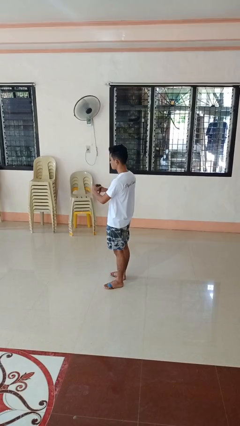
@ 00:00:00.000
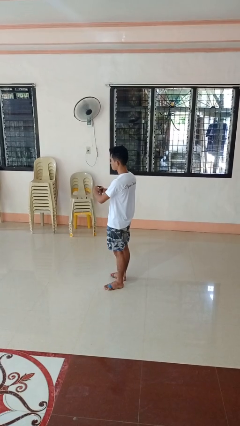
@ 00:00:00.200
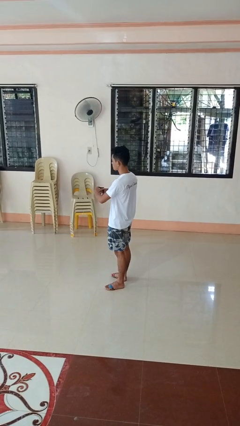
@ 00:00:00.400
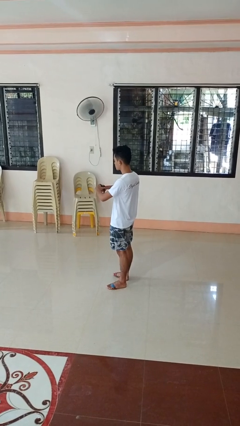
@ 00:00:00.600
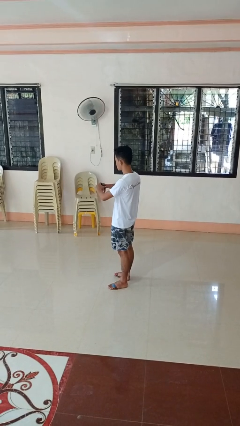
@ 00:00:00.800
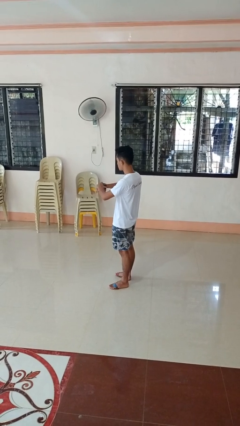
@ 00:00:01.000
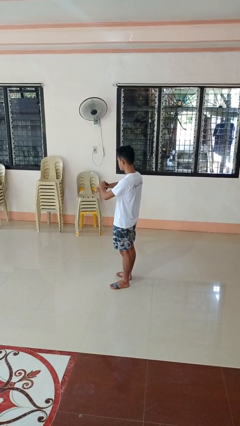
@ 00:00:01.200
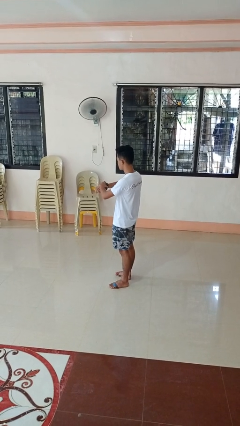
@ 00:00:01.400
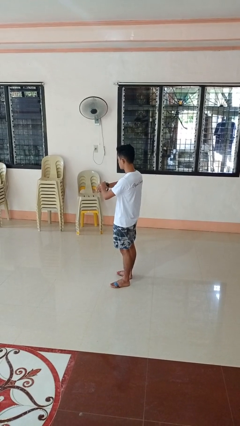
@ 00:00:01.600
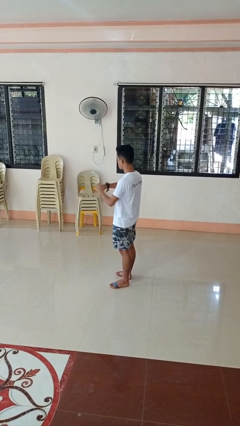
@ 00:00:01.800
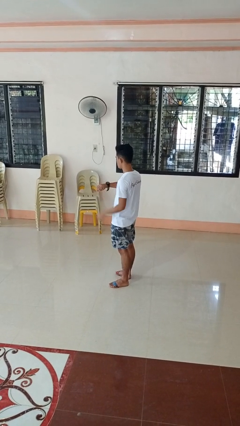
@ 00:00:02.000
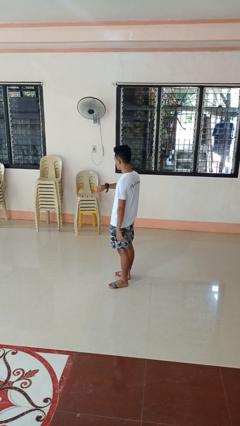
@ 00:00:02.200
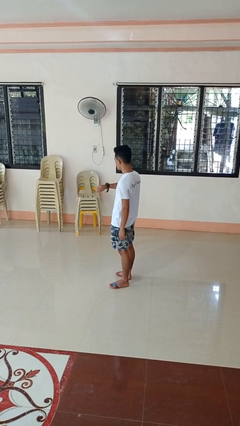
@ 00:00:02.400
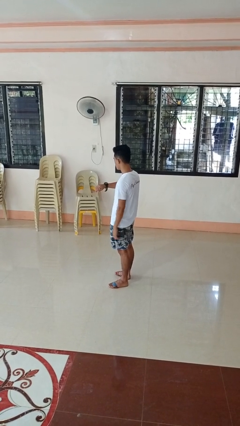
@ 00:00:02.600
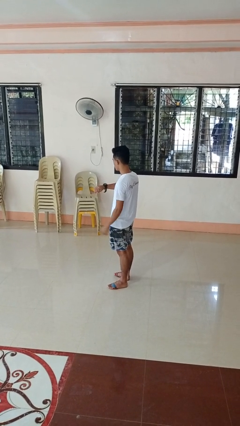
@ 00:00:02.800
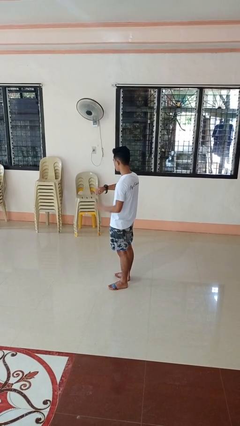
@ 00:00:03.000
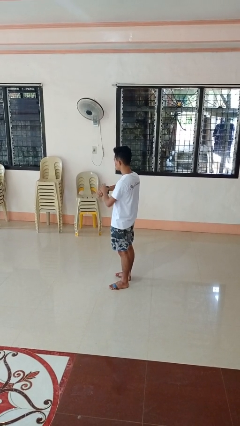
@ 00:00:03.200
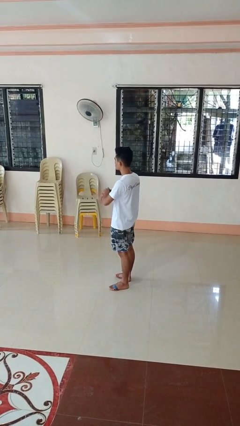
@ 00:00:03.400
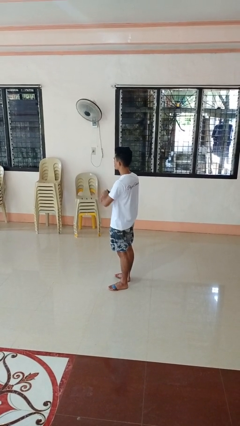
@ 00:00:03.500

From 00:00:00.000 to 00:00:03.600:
person puts on wristwatch

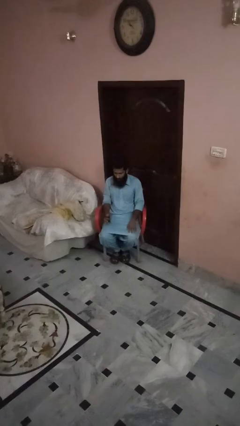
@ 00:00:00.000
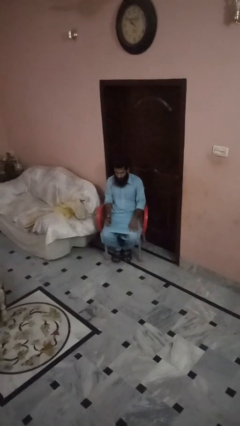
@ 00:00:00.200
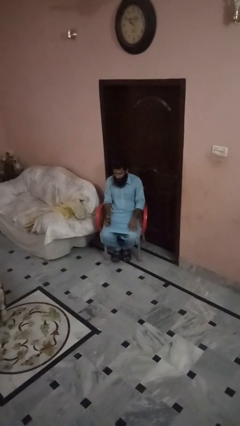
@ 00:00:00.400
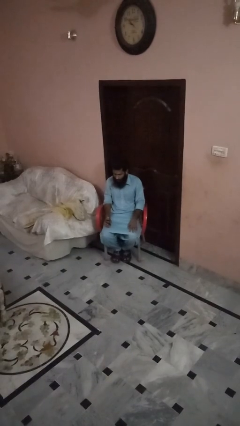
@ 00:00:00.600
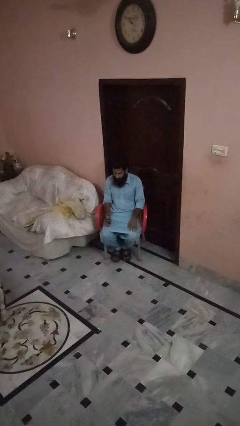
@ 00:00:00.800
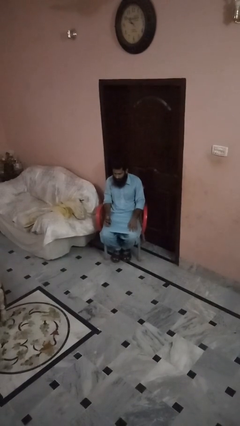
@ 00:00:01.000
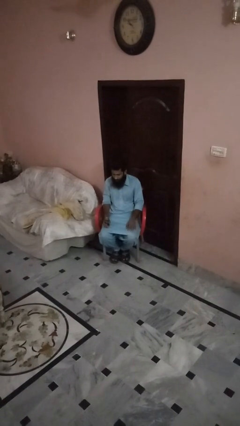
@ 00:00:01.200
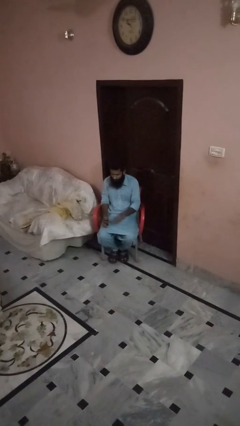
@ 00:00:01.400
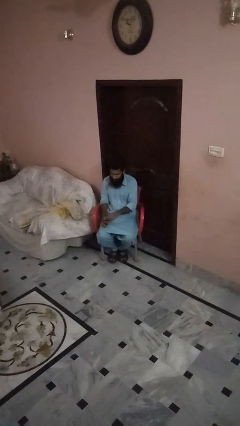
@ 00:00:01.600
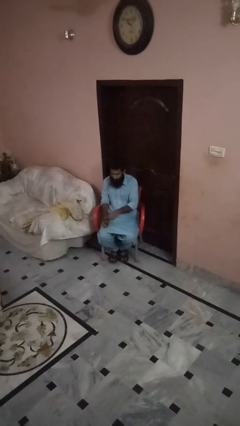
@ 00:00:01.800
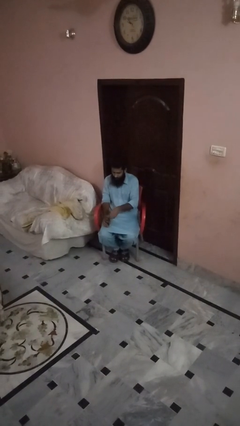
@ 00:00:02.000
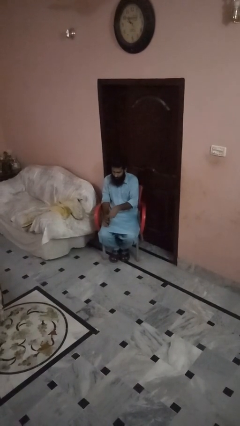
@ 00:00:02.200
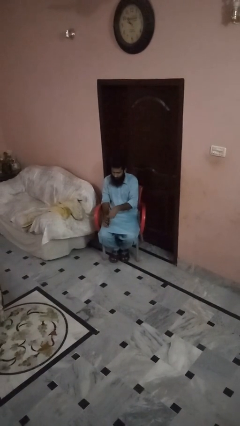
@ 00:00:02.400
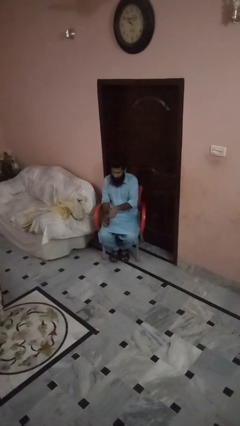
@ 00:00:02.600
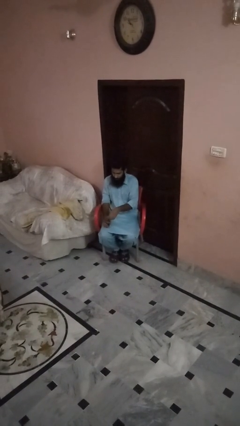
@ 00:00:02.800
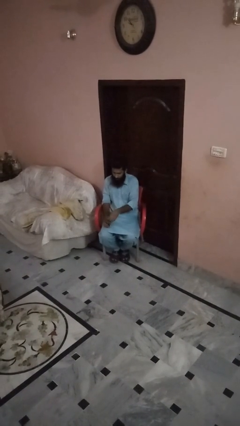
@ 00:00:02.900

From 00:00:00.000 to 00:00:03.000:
person opens beverage can

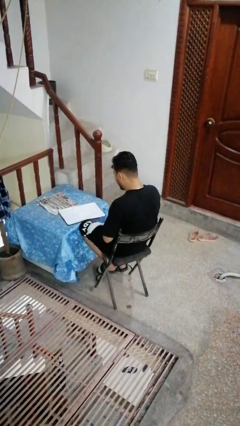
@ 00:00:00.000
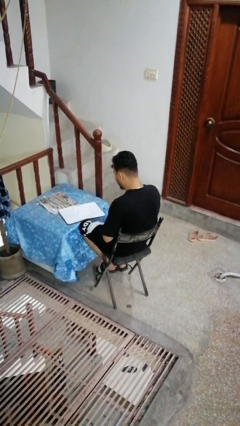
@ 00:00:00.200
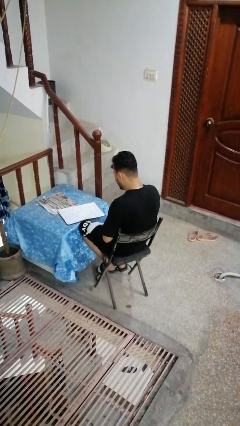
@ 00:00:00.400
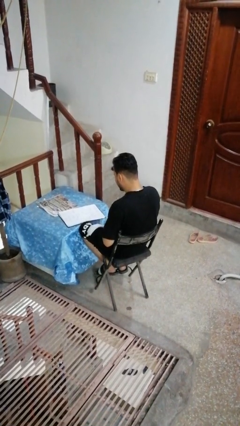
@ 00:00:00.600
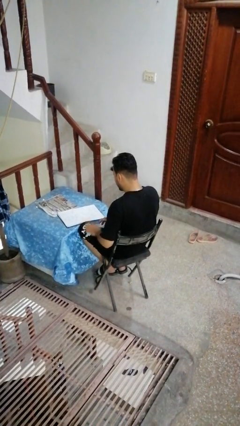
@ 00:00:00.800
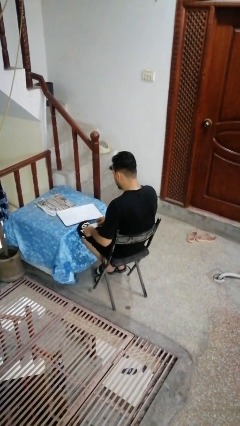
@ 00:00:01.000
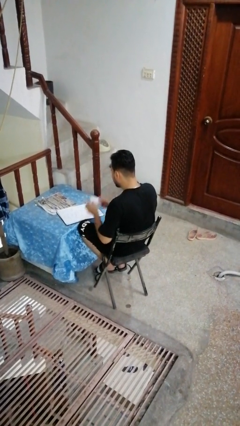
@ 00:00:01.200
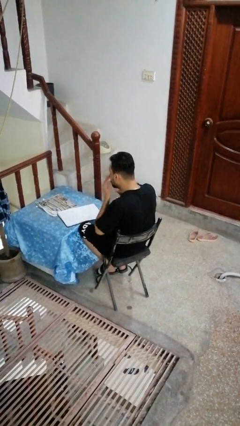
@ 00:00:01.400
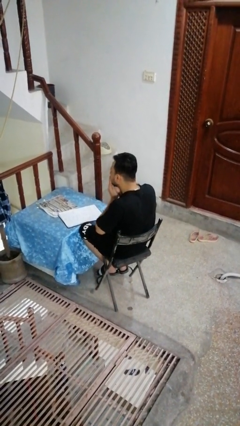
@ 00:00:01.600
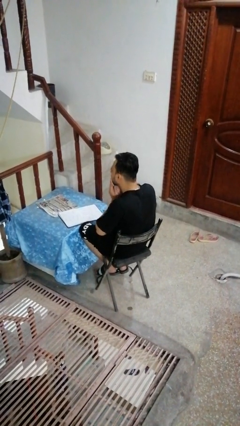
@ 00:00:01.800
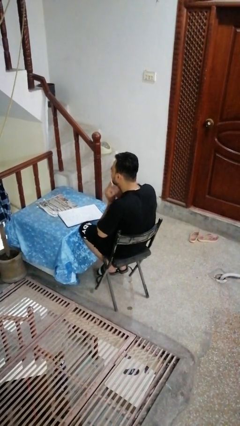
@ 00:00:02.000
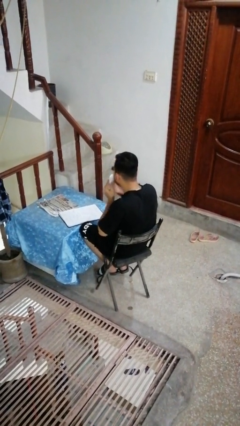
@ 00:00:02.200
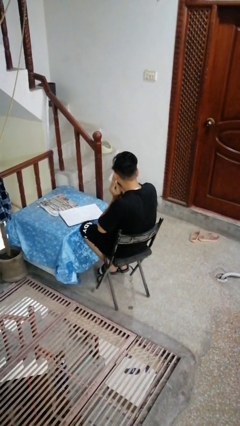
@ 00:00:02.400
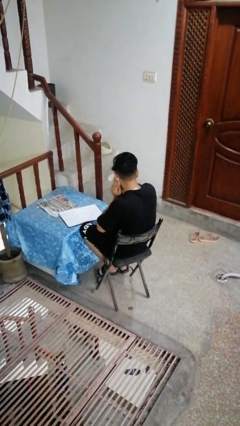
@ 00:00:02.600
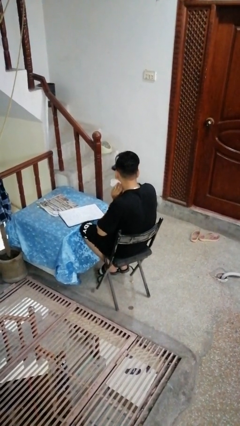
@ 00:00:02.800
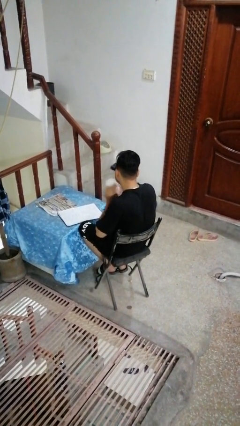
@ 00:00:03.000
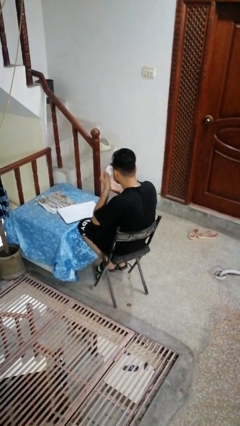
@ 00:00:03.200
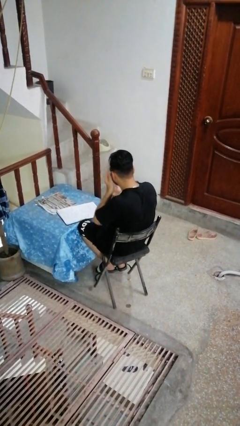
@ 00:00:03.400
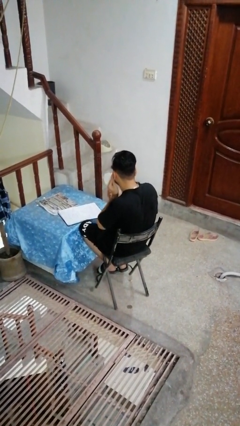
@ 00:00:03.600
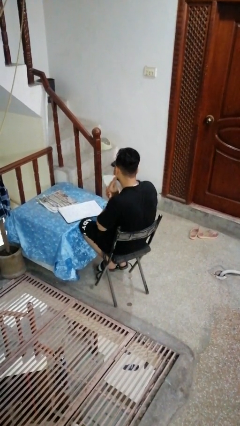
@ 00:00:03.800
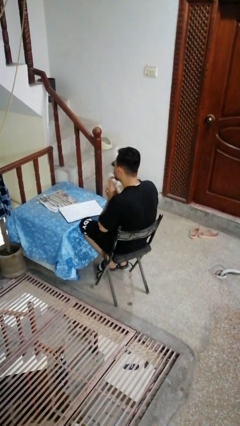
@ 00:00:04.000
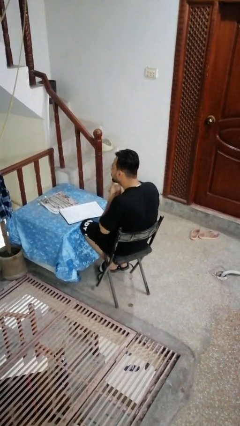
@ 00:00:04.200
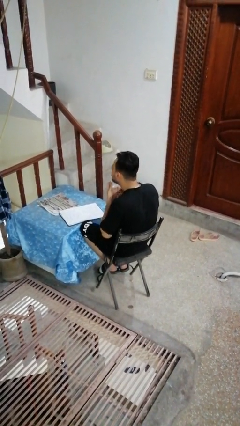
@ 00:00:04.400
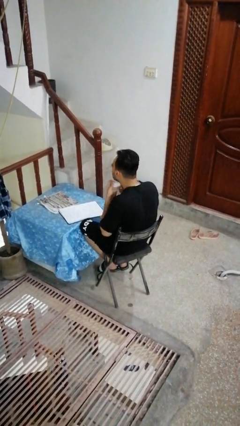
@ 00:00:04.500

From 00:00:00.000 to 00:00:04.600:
person wipes mouth with napkin

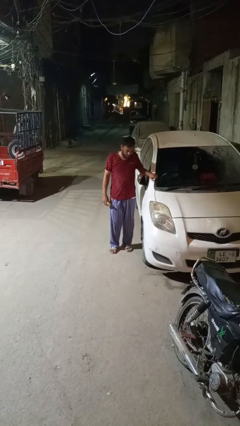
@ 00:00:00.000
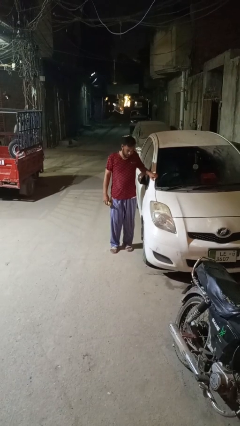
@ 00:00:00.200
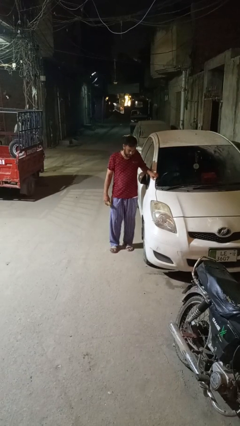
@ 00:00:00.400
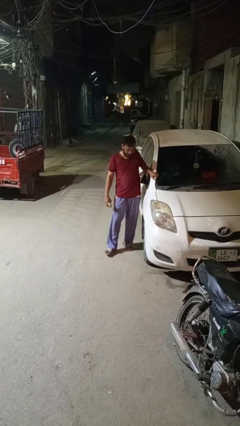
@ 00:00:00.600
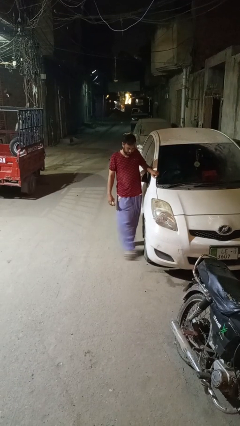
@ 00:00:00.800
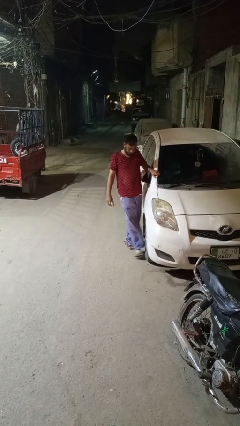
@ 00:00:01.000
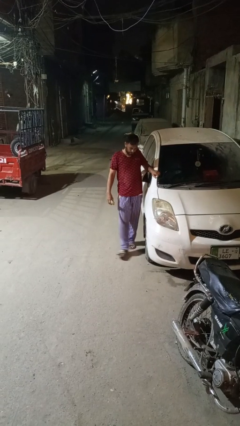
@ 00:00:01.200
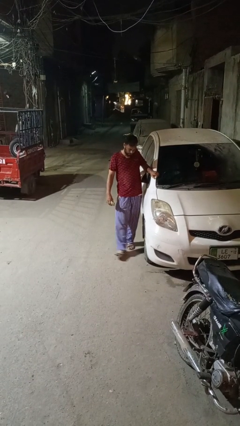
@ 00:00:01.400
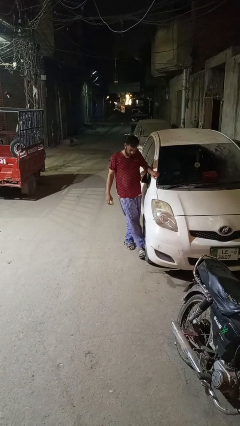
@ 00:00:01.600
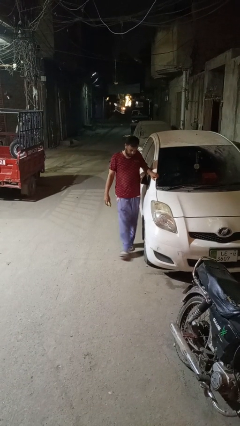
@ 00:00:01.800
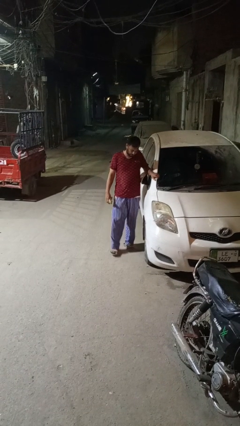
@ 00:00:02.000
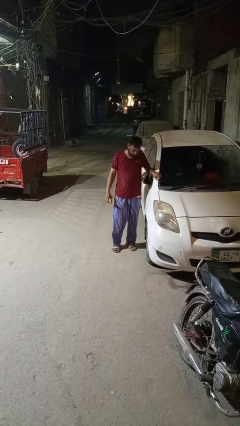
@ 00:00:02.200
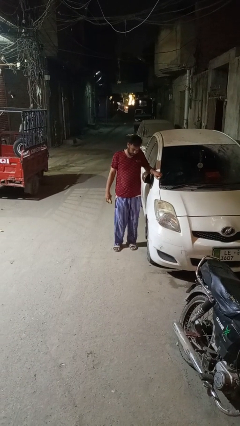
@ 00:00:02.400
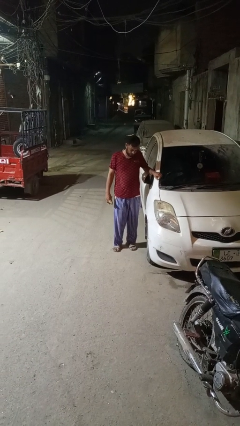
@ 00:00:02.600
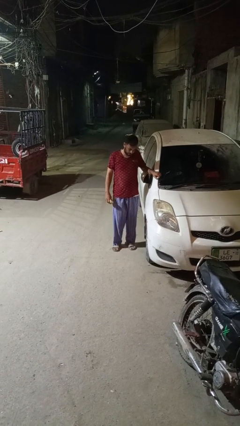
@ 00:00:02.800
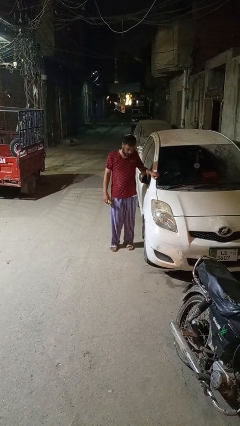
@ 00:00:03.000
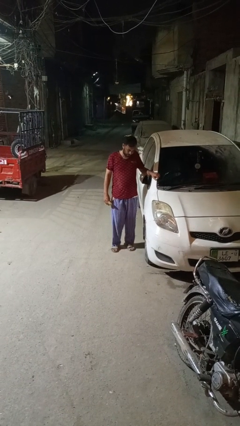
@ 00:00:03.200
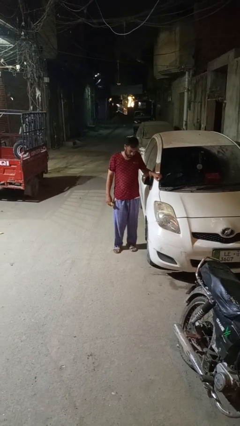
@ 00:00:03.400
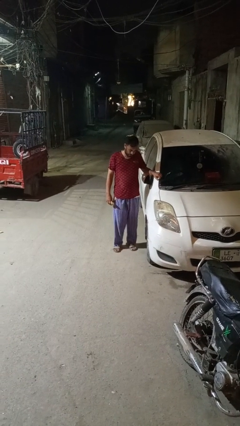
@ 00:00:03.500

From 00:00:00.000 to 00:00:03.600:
person kicks car tires

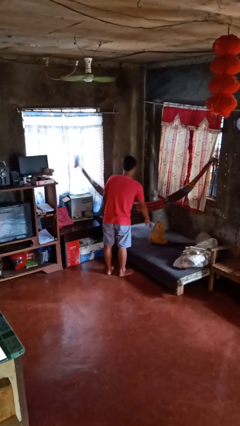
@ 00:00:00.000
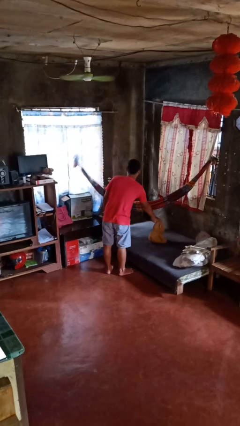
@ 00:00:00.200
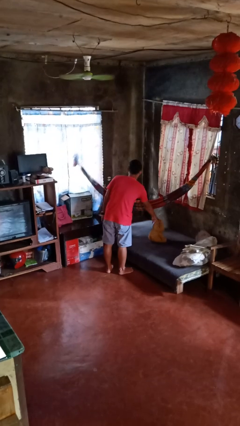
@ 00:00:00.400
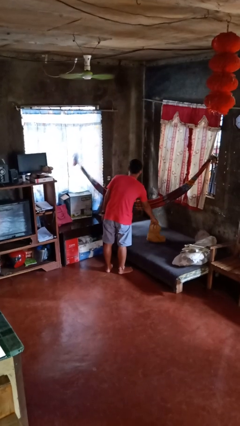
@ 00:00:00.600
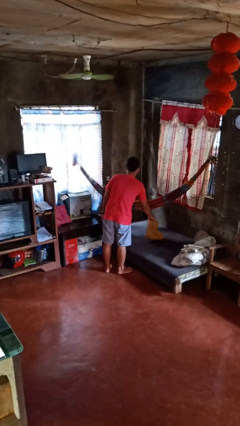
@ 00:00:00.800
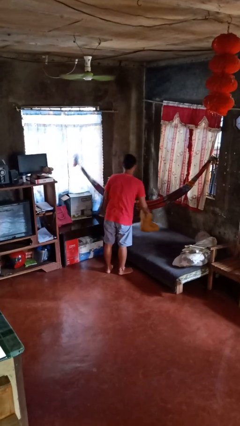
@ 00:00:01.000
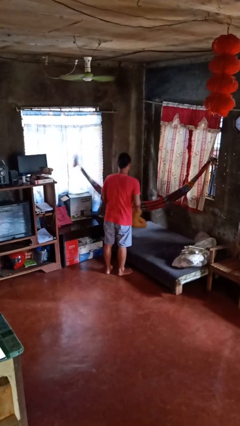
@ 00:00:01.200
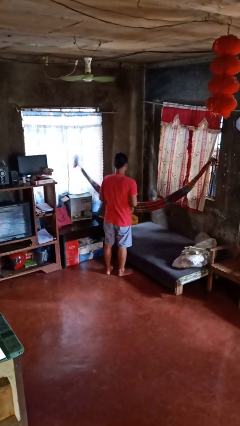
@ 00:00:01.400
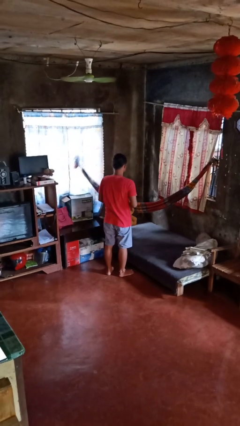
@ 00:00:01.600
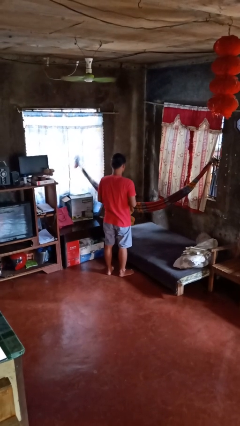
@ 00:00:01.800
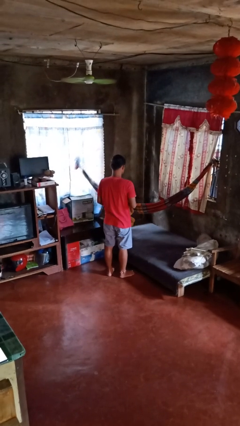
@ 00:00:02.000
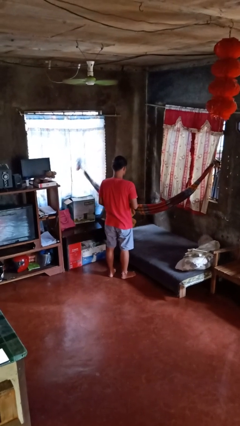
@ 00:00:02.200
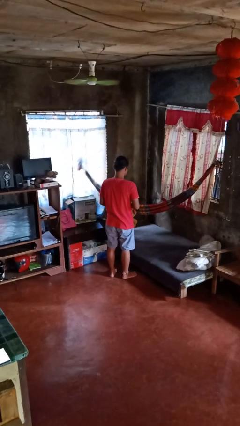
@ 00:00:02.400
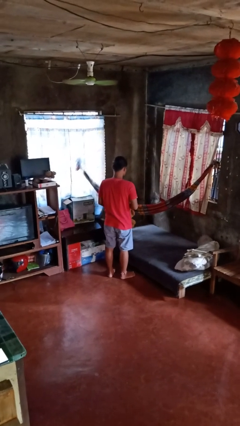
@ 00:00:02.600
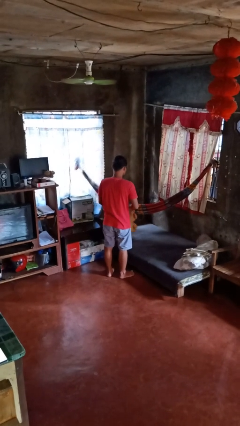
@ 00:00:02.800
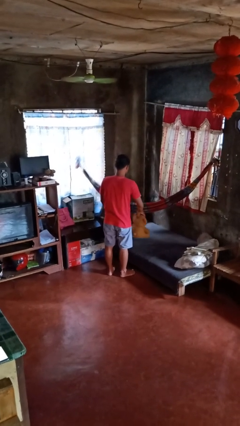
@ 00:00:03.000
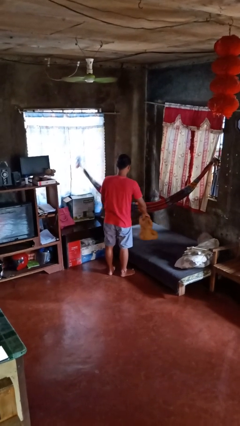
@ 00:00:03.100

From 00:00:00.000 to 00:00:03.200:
person picks up object from bed
